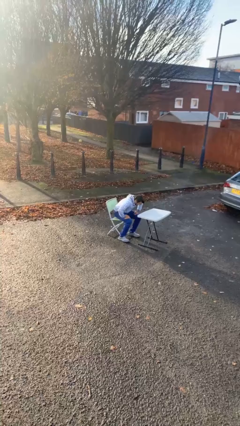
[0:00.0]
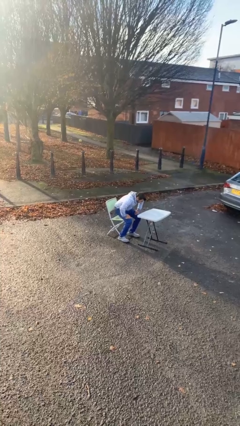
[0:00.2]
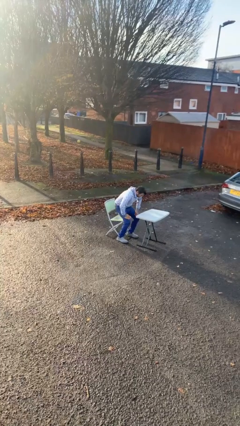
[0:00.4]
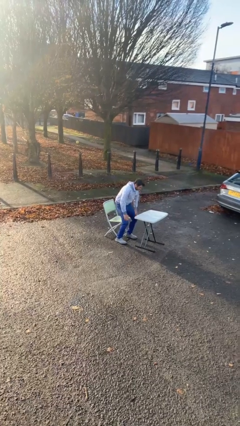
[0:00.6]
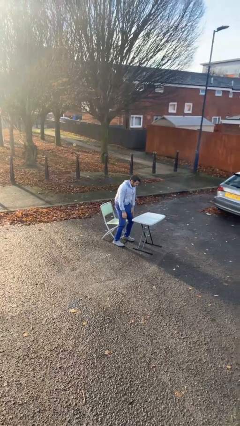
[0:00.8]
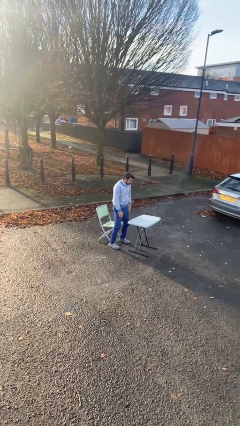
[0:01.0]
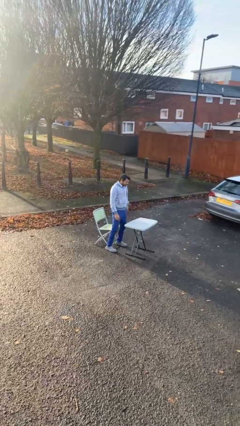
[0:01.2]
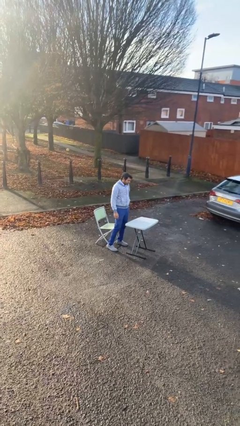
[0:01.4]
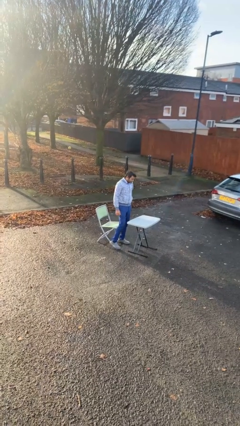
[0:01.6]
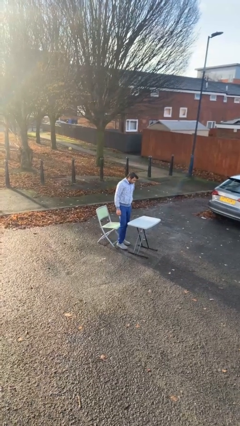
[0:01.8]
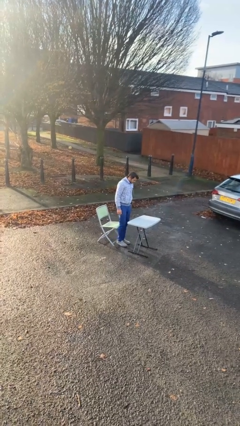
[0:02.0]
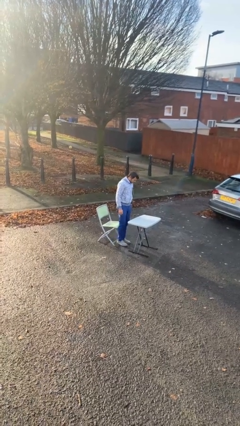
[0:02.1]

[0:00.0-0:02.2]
person stands up

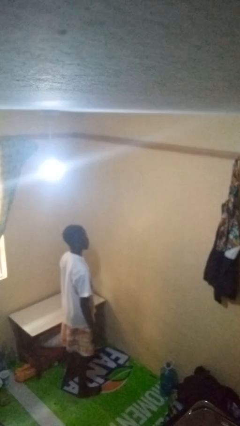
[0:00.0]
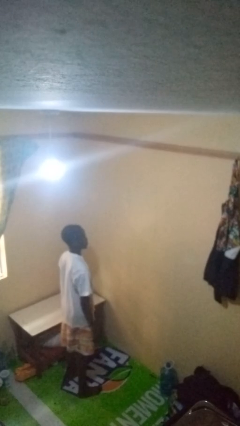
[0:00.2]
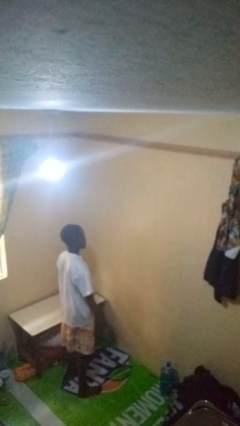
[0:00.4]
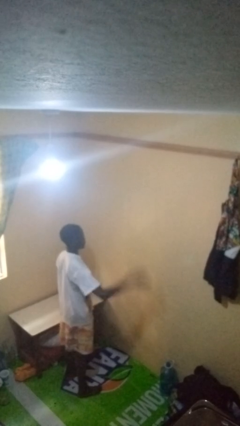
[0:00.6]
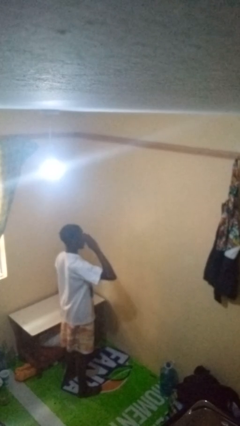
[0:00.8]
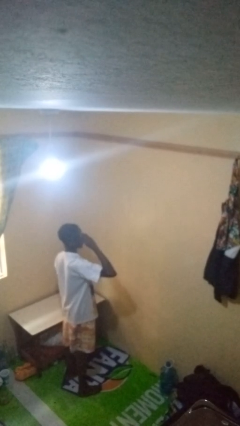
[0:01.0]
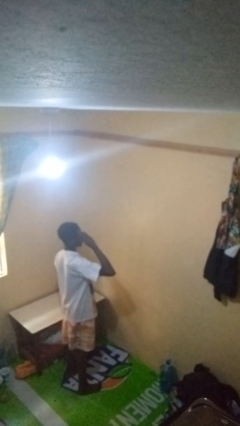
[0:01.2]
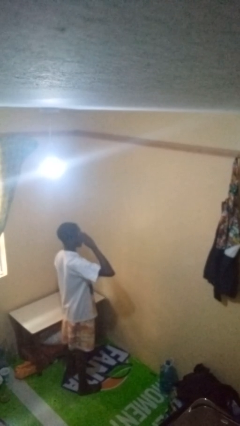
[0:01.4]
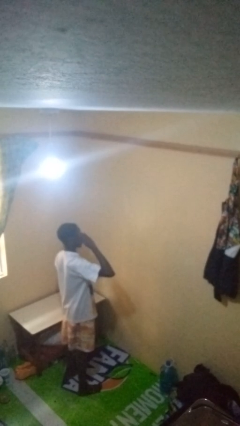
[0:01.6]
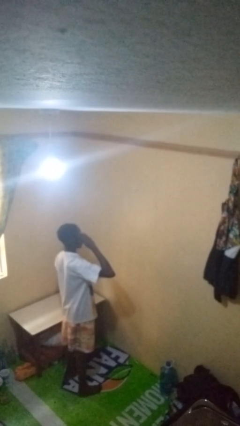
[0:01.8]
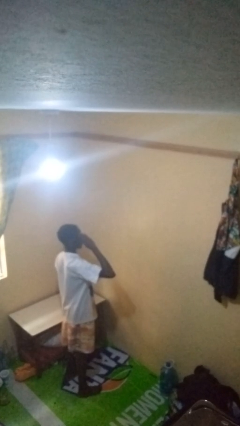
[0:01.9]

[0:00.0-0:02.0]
person salutes

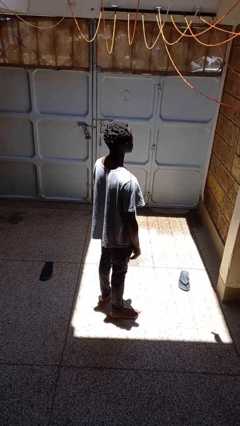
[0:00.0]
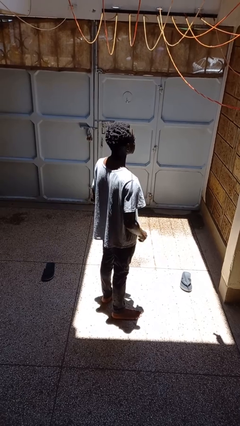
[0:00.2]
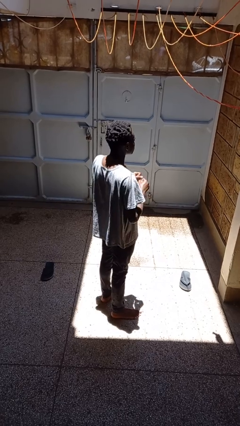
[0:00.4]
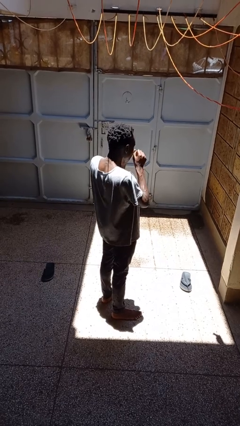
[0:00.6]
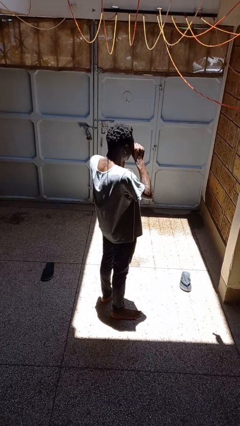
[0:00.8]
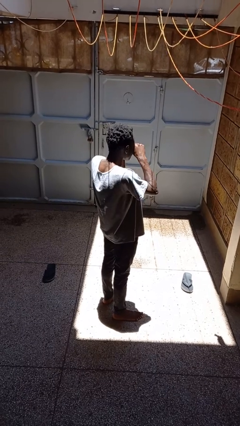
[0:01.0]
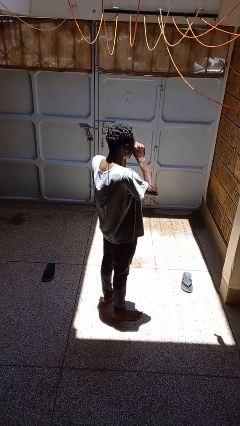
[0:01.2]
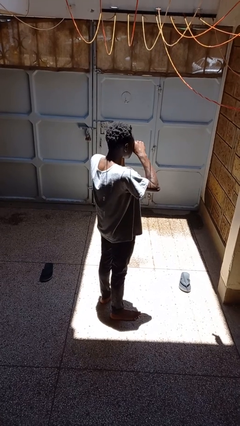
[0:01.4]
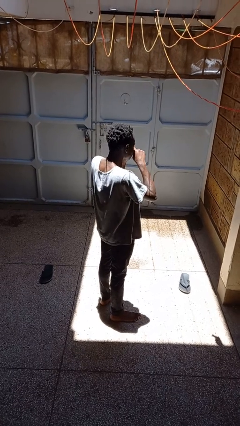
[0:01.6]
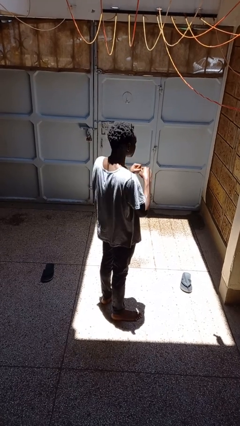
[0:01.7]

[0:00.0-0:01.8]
person rubs eyes

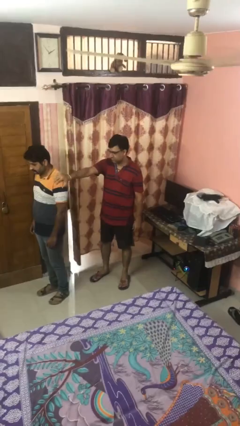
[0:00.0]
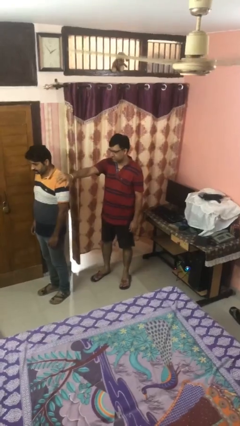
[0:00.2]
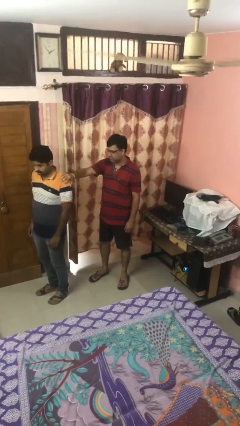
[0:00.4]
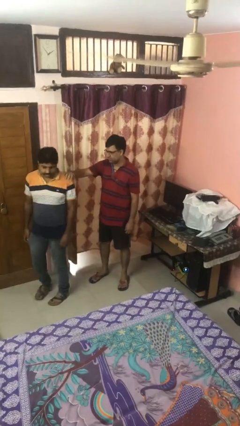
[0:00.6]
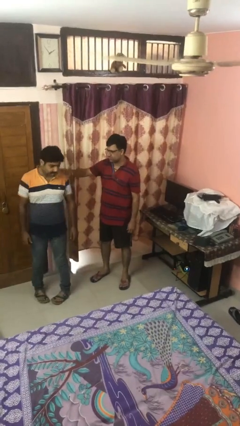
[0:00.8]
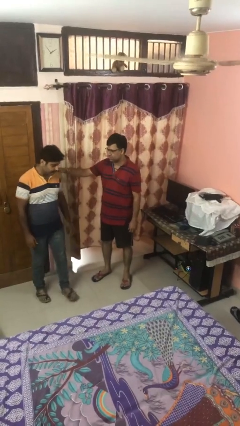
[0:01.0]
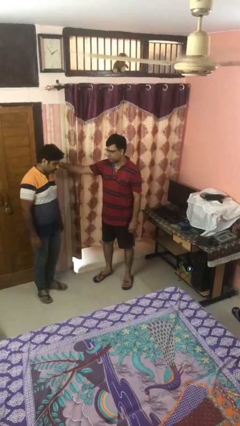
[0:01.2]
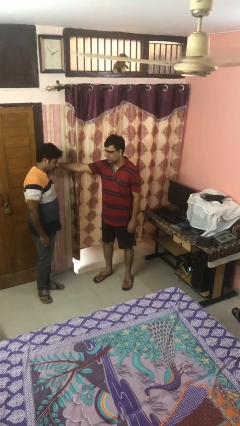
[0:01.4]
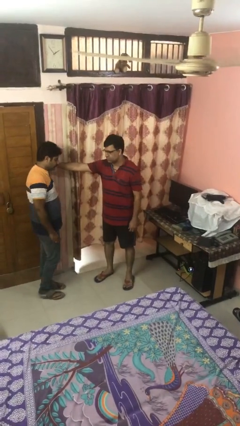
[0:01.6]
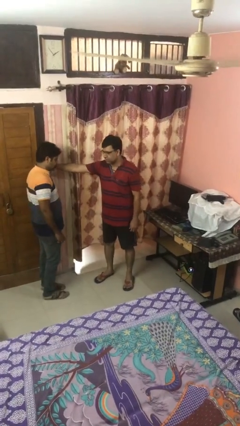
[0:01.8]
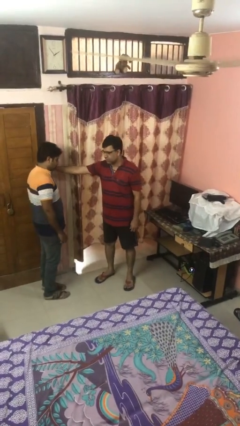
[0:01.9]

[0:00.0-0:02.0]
person spins person around

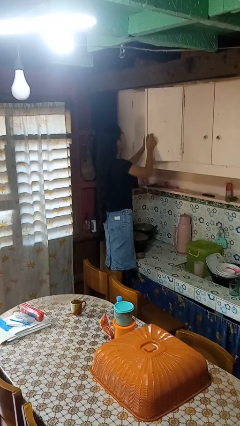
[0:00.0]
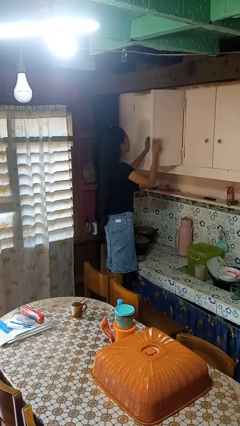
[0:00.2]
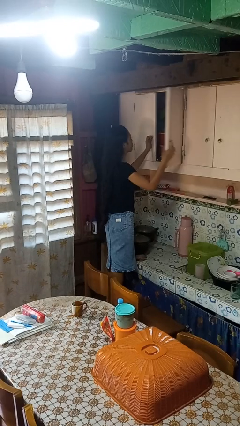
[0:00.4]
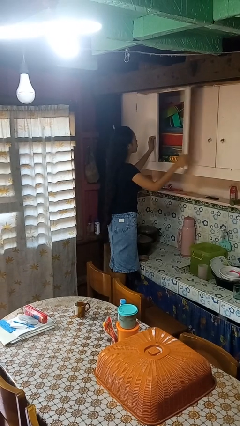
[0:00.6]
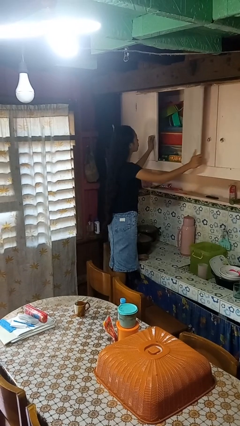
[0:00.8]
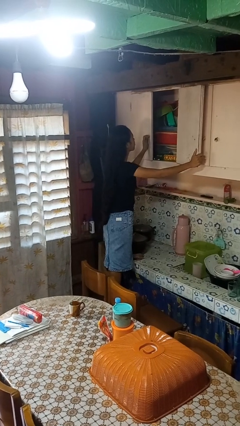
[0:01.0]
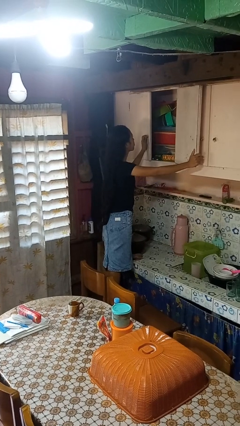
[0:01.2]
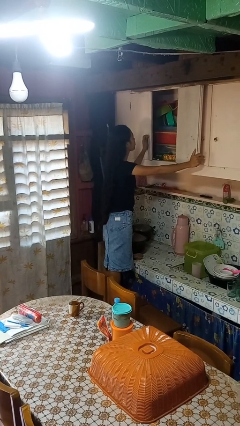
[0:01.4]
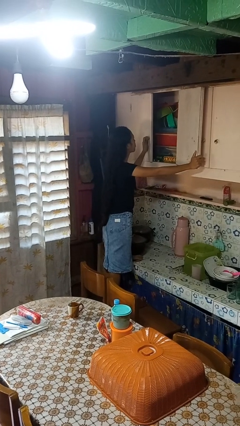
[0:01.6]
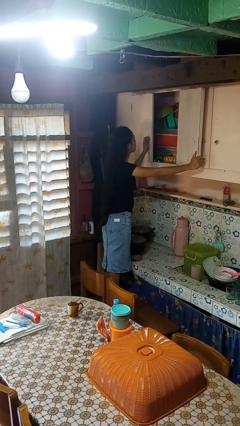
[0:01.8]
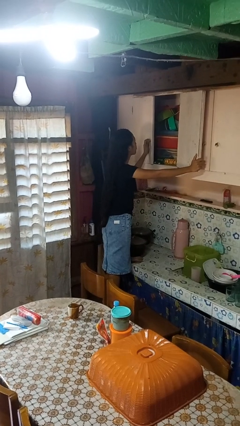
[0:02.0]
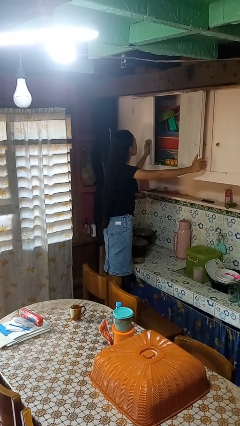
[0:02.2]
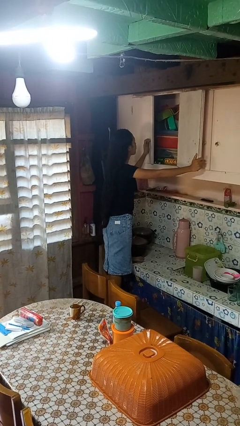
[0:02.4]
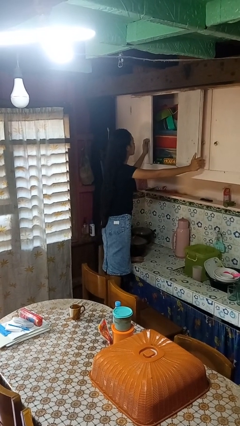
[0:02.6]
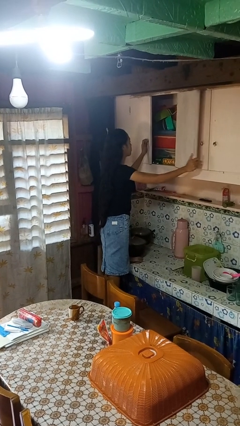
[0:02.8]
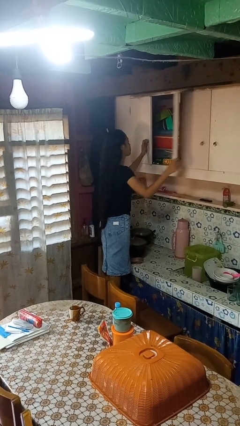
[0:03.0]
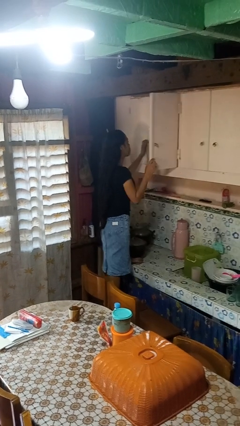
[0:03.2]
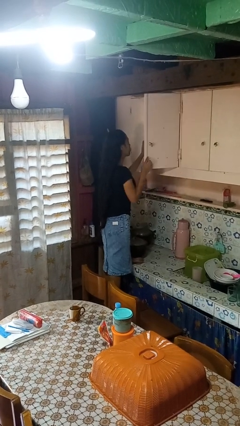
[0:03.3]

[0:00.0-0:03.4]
person opens cabinet

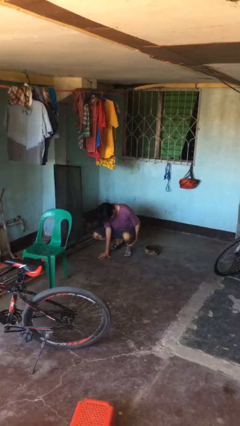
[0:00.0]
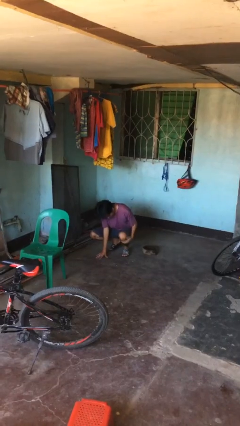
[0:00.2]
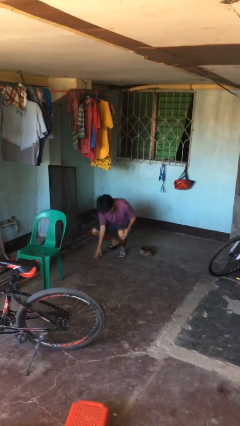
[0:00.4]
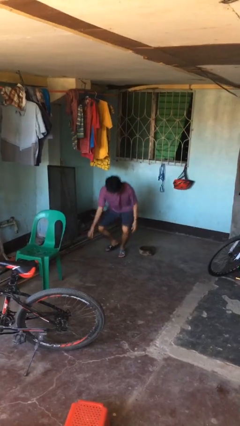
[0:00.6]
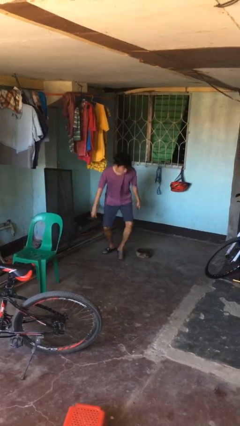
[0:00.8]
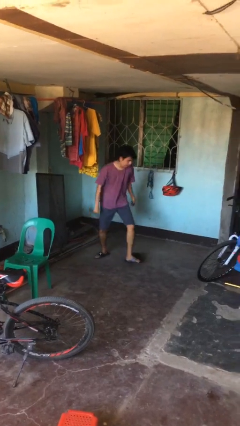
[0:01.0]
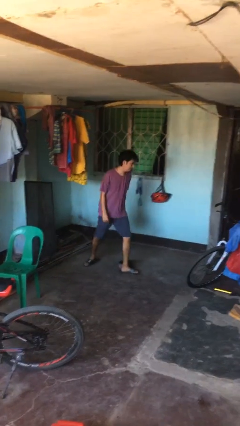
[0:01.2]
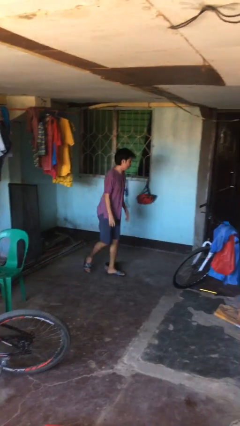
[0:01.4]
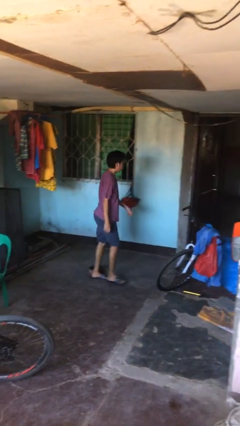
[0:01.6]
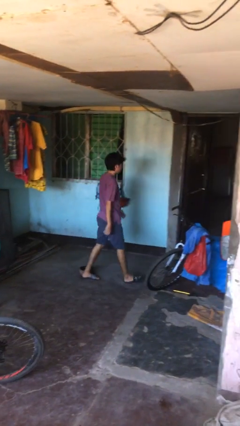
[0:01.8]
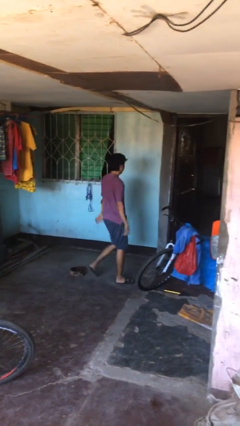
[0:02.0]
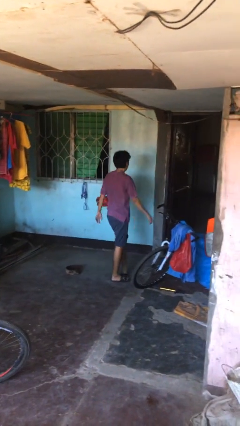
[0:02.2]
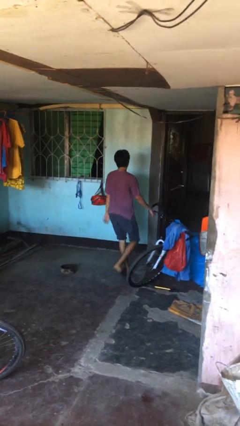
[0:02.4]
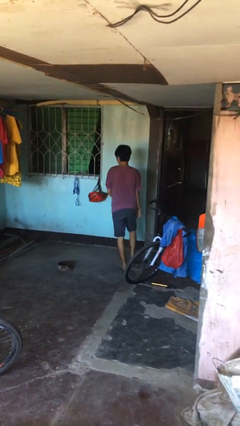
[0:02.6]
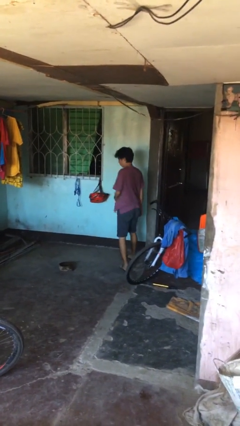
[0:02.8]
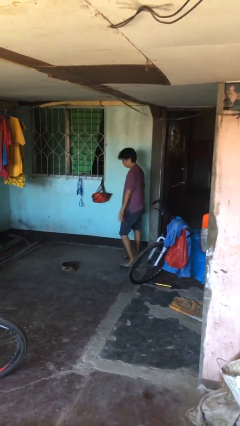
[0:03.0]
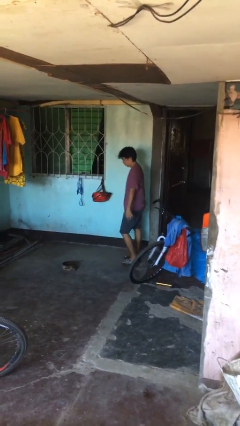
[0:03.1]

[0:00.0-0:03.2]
person stands up from floor

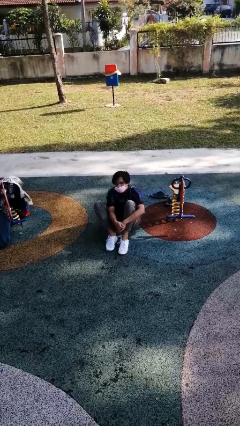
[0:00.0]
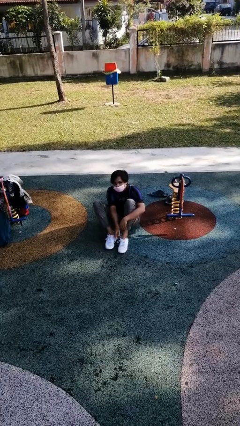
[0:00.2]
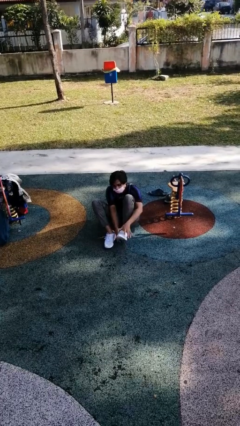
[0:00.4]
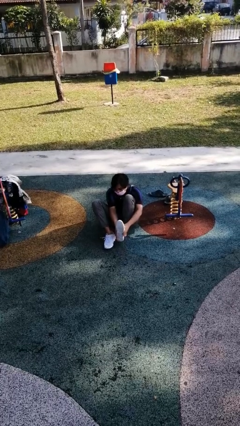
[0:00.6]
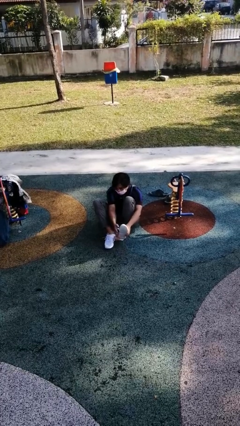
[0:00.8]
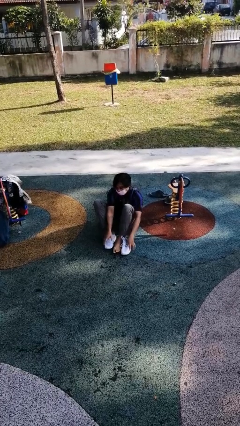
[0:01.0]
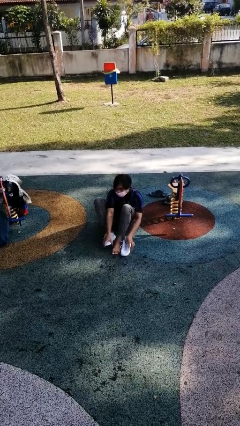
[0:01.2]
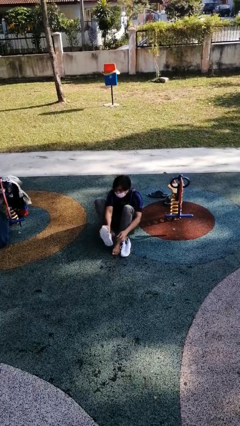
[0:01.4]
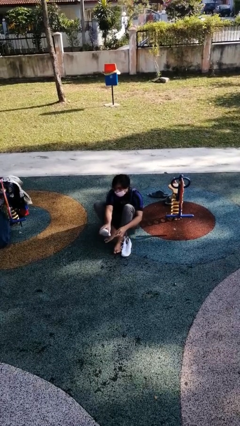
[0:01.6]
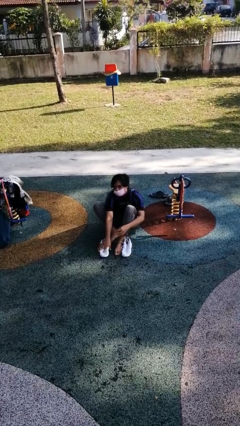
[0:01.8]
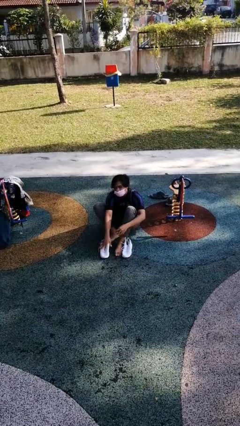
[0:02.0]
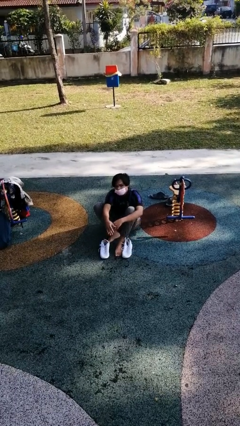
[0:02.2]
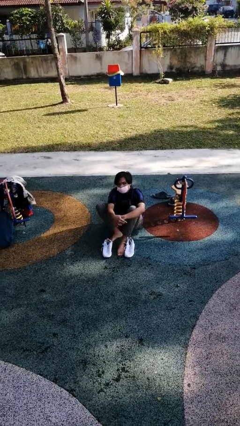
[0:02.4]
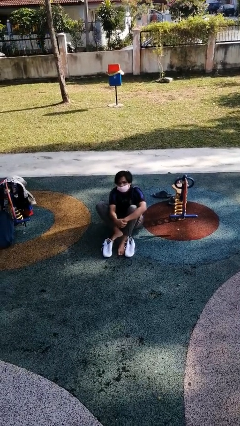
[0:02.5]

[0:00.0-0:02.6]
person takes off shoes
